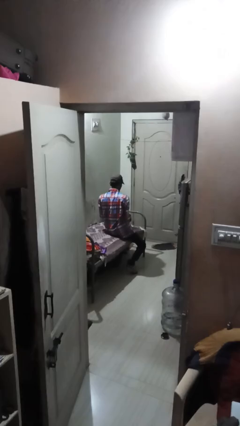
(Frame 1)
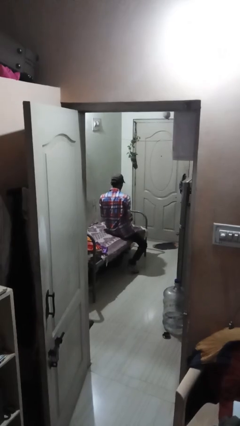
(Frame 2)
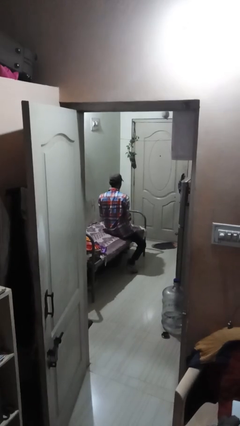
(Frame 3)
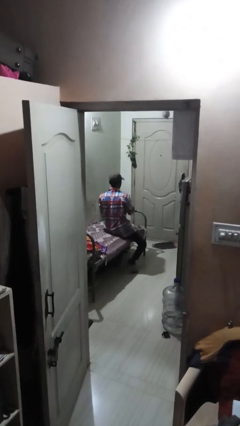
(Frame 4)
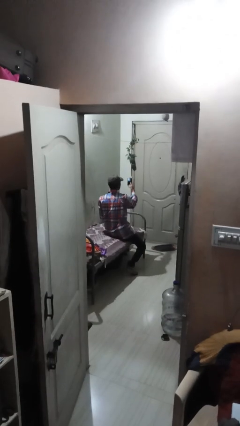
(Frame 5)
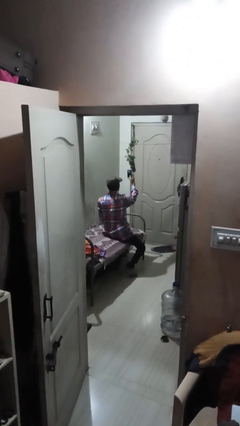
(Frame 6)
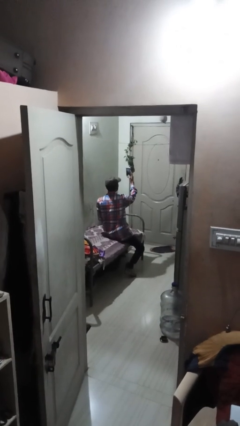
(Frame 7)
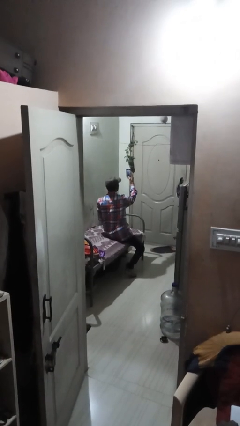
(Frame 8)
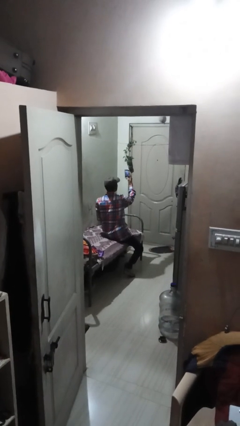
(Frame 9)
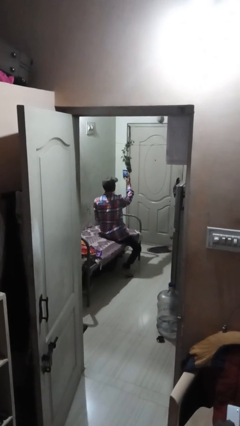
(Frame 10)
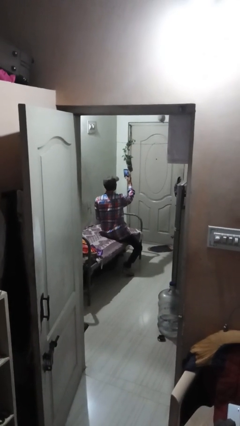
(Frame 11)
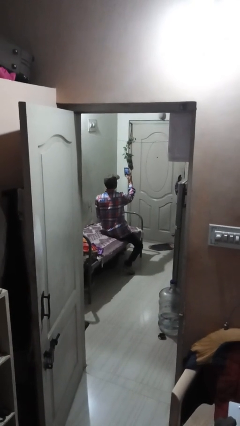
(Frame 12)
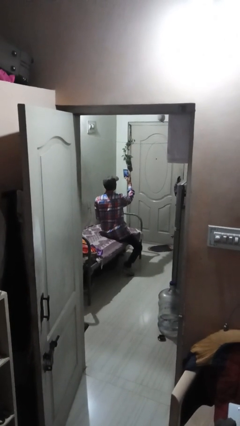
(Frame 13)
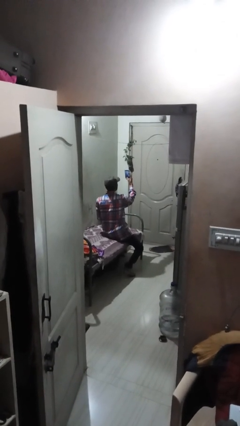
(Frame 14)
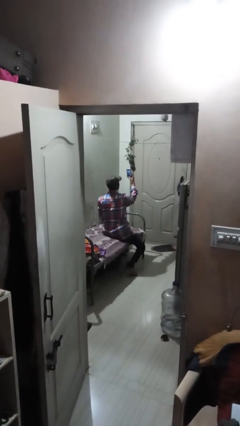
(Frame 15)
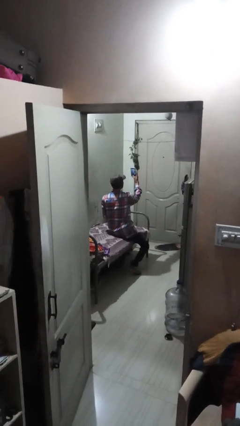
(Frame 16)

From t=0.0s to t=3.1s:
person takes selfie

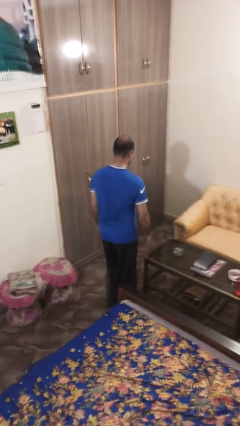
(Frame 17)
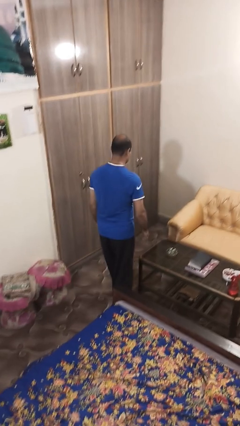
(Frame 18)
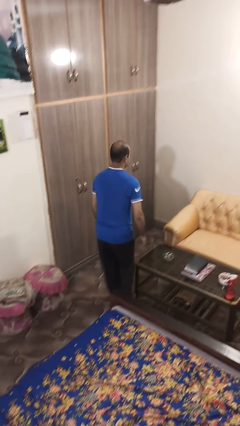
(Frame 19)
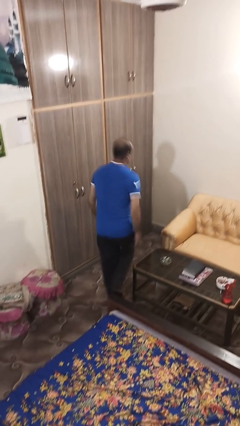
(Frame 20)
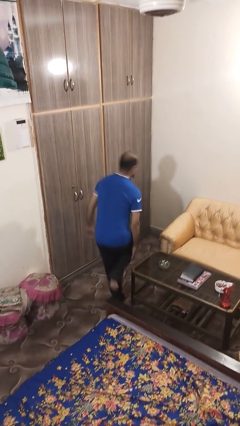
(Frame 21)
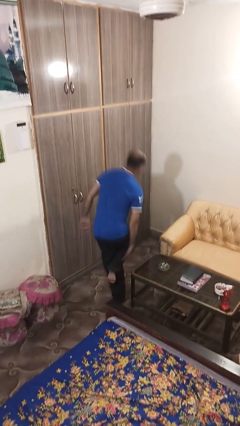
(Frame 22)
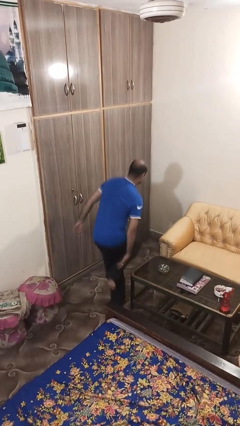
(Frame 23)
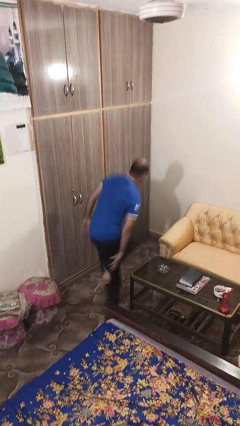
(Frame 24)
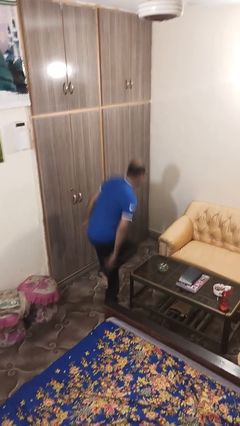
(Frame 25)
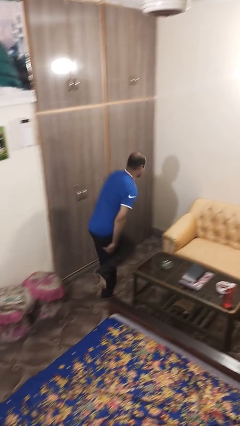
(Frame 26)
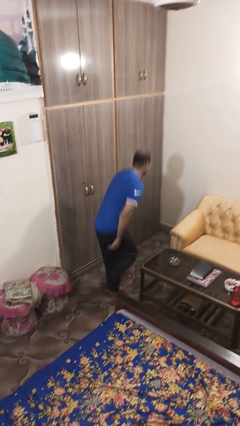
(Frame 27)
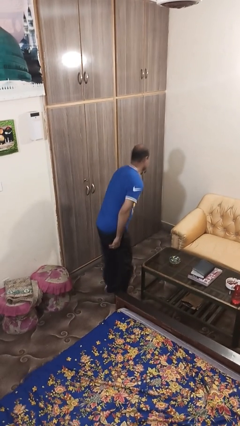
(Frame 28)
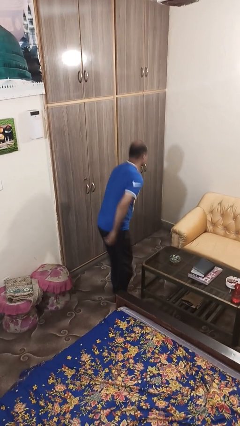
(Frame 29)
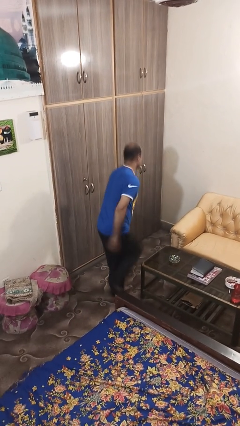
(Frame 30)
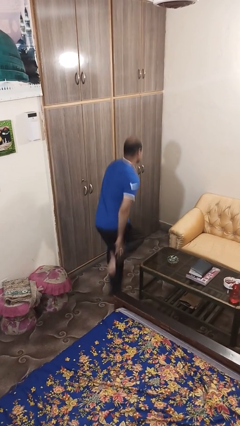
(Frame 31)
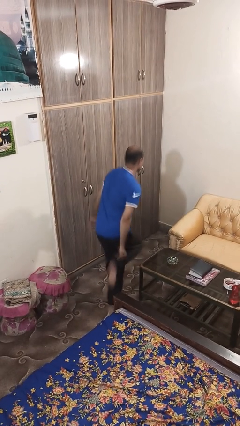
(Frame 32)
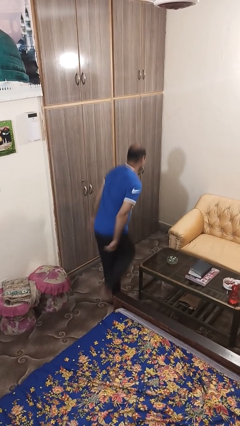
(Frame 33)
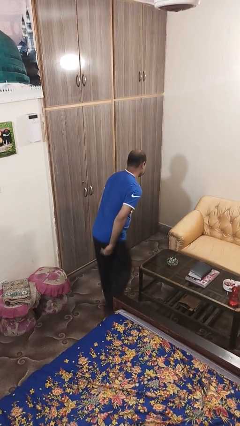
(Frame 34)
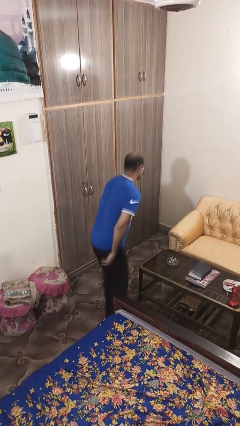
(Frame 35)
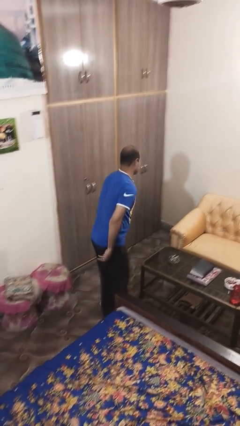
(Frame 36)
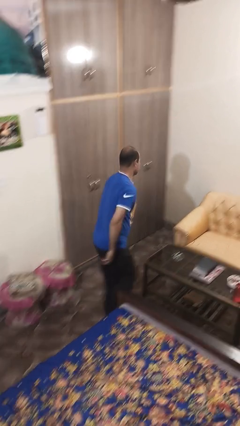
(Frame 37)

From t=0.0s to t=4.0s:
person bumps into table

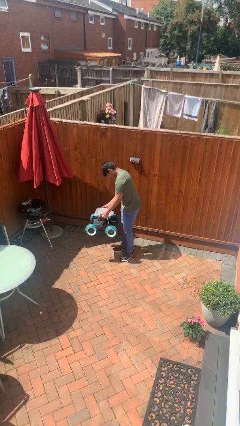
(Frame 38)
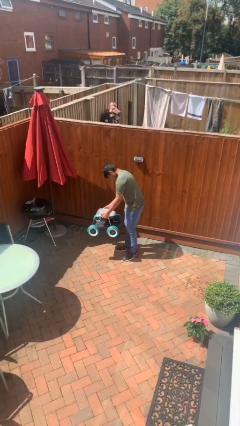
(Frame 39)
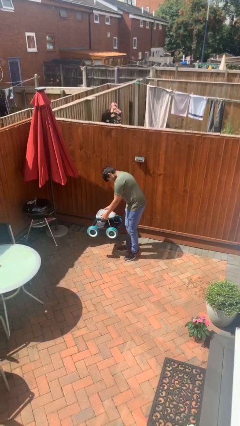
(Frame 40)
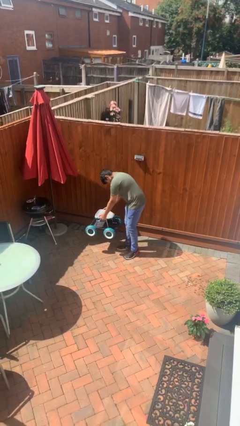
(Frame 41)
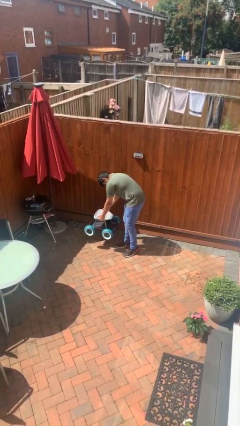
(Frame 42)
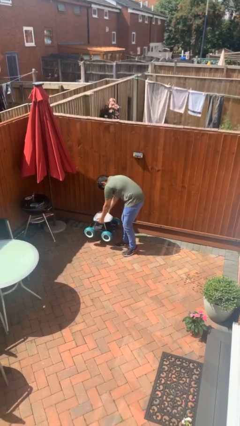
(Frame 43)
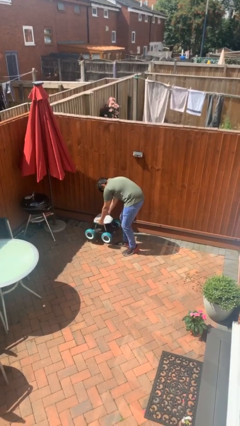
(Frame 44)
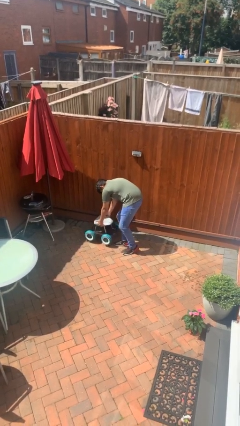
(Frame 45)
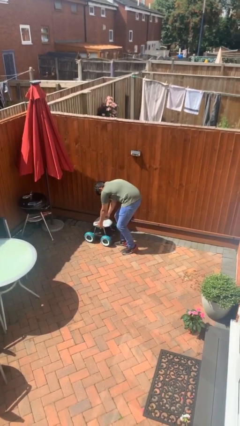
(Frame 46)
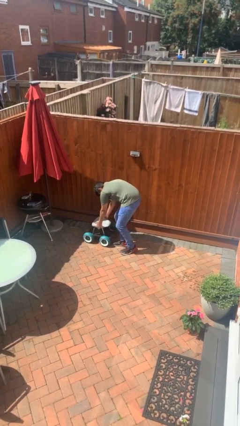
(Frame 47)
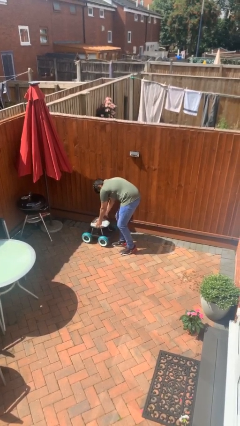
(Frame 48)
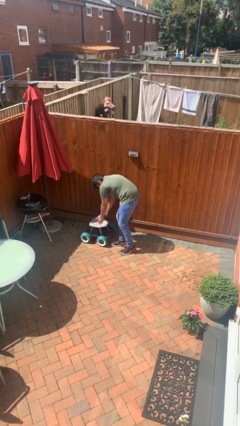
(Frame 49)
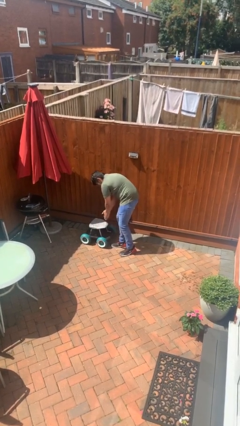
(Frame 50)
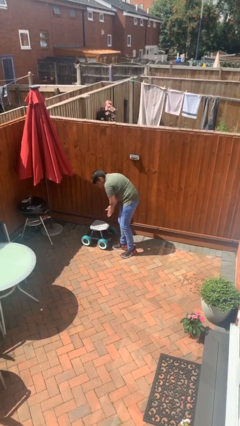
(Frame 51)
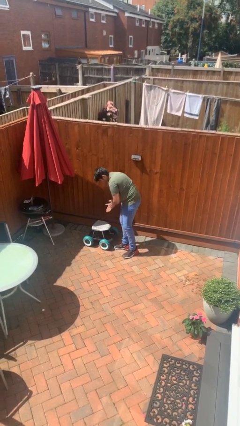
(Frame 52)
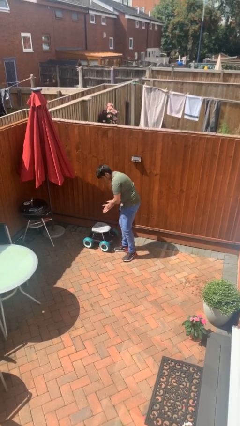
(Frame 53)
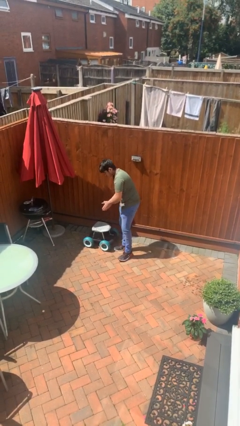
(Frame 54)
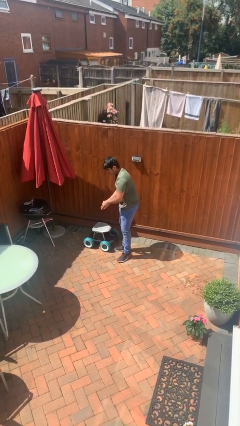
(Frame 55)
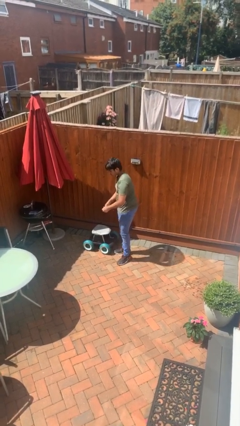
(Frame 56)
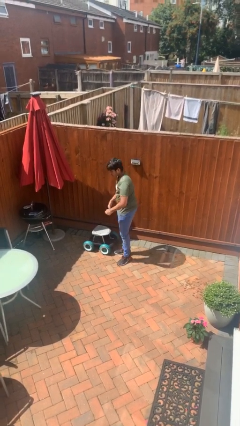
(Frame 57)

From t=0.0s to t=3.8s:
person puts down object on floor

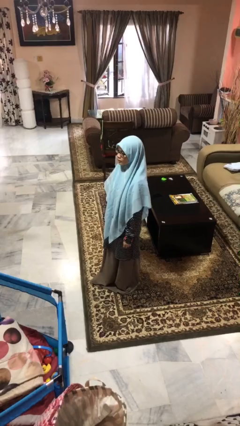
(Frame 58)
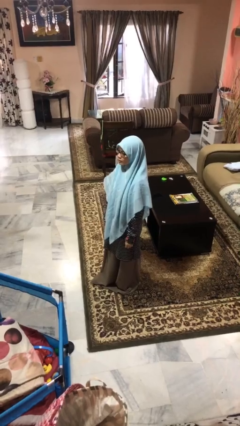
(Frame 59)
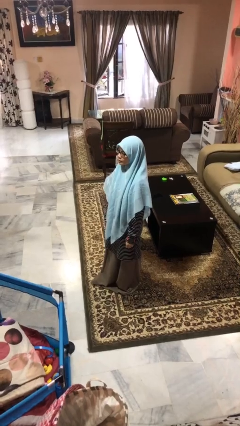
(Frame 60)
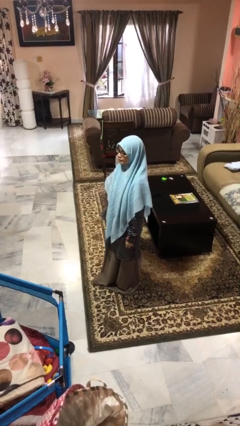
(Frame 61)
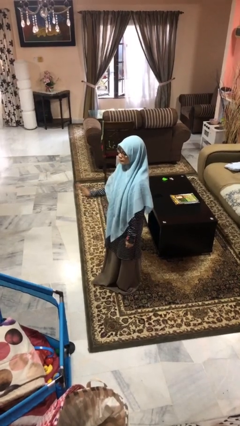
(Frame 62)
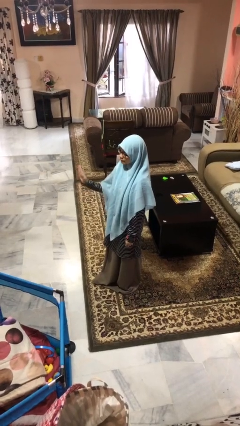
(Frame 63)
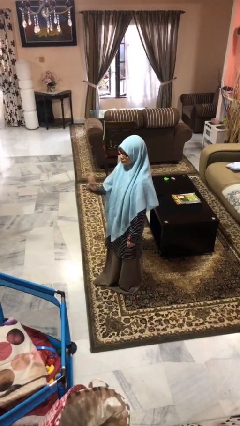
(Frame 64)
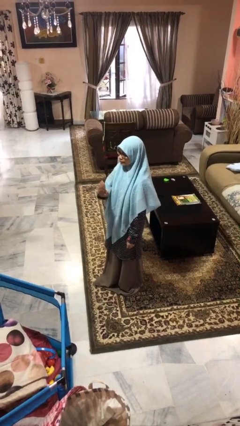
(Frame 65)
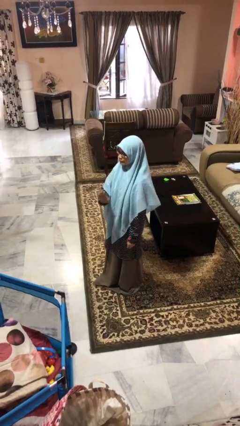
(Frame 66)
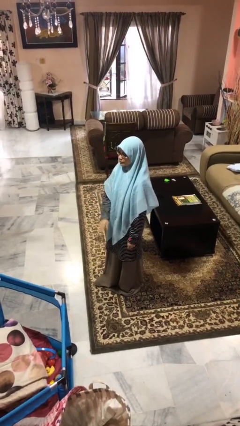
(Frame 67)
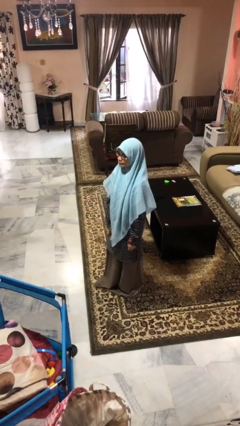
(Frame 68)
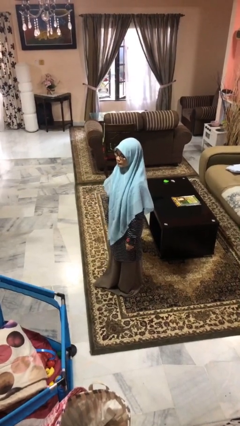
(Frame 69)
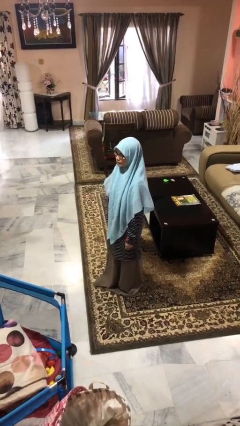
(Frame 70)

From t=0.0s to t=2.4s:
person gestures swipe left

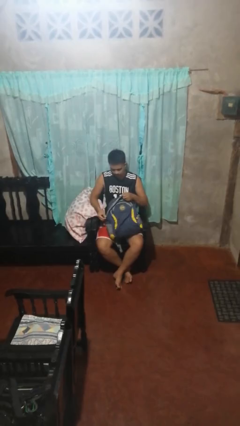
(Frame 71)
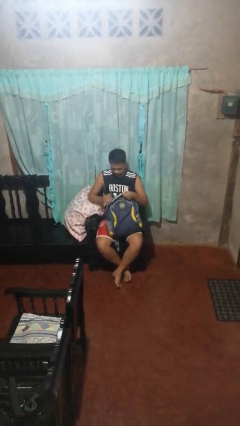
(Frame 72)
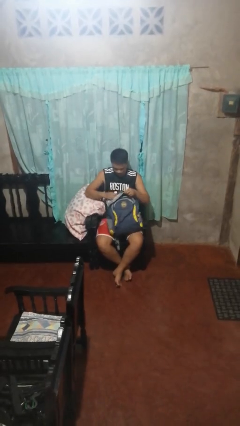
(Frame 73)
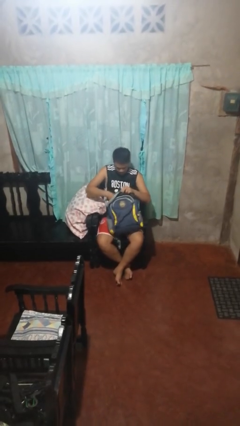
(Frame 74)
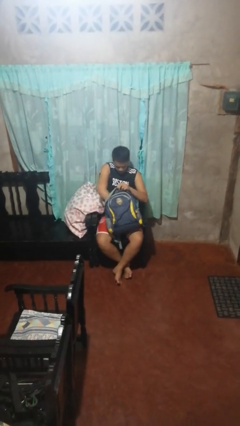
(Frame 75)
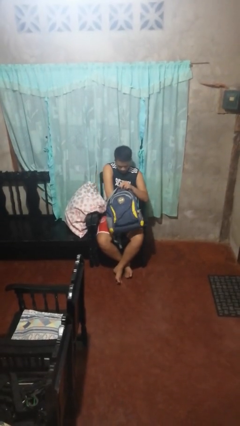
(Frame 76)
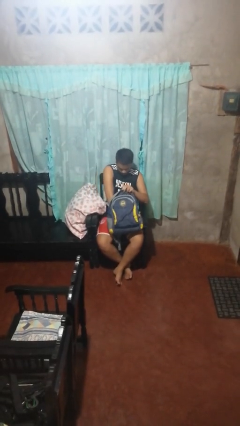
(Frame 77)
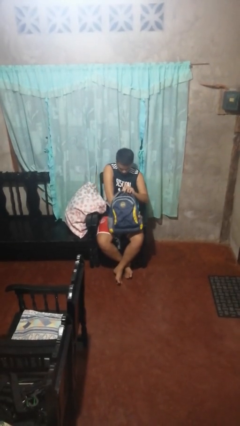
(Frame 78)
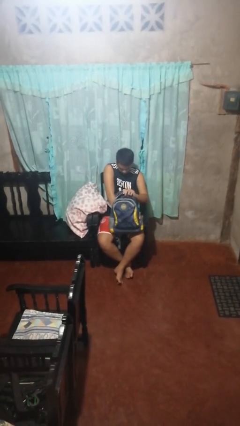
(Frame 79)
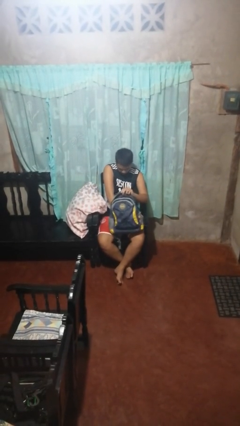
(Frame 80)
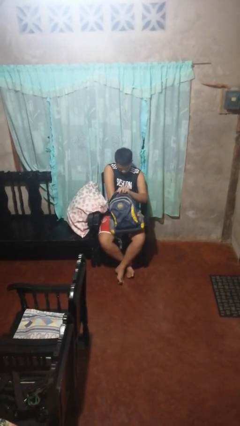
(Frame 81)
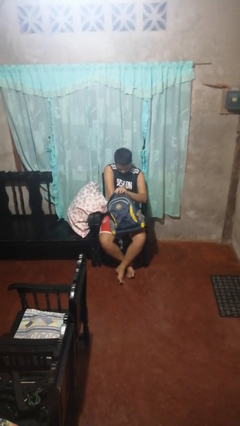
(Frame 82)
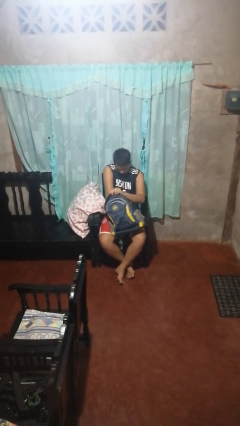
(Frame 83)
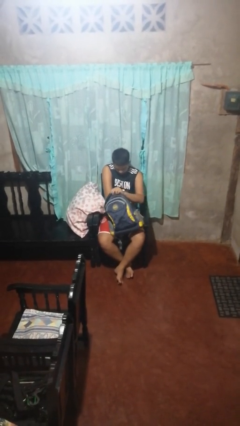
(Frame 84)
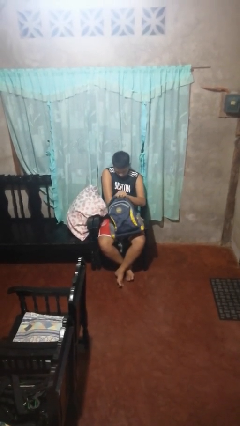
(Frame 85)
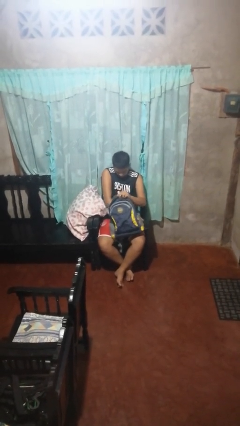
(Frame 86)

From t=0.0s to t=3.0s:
person searches in backpack

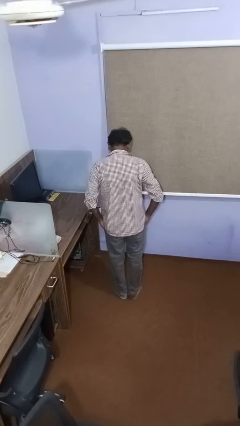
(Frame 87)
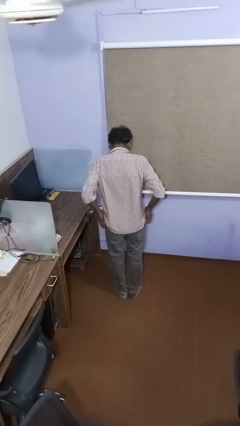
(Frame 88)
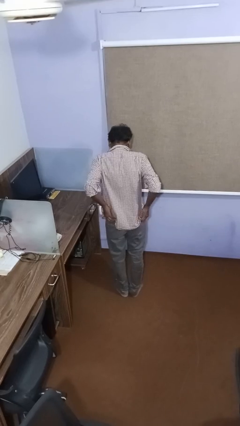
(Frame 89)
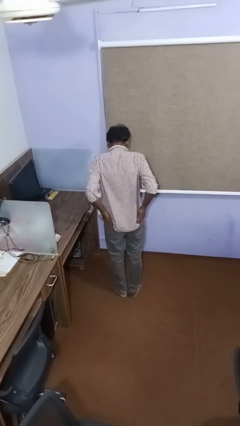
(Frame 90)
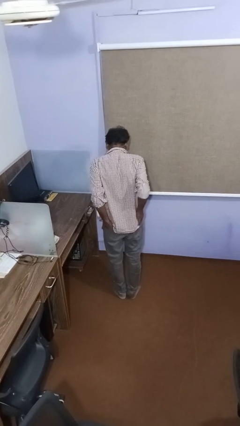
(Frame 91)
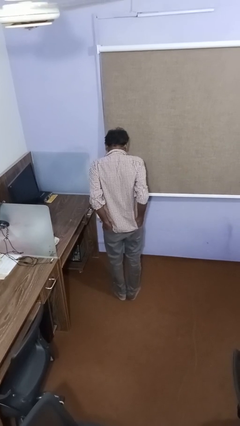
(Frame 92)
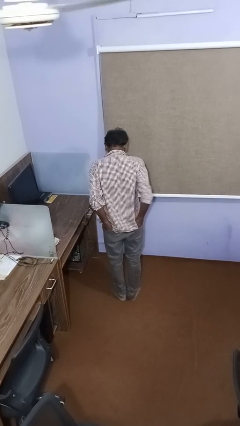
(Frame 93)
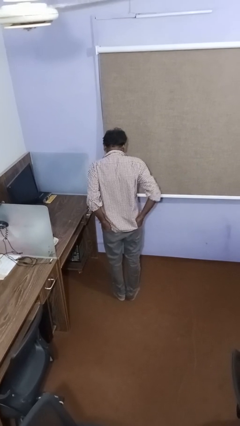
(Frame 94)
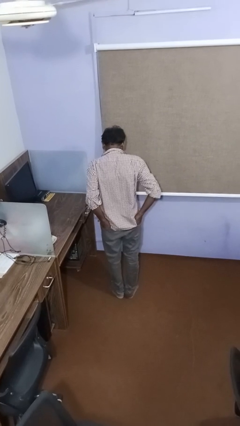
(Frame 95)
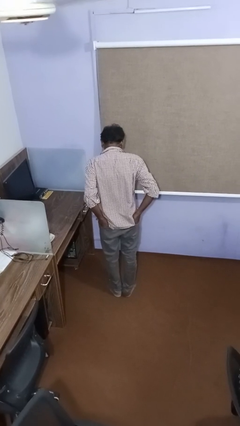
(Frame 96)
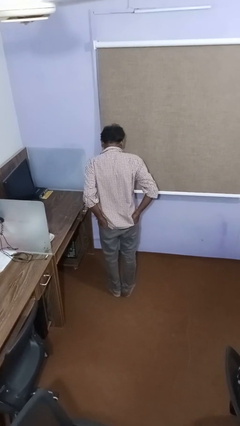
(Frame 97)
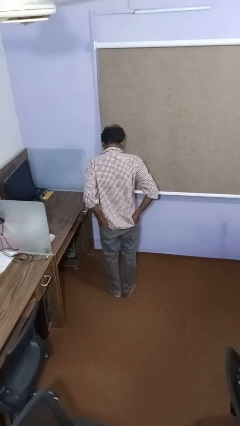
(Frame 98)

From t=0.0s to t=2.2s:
person puts hands in back pockets
